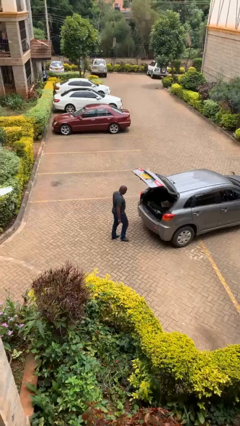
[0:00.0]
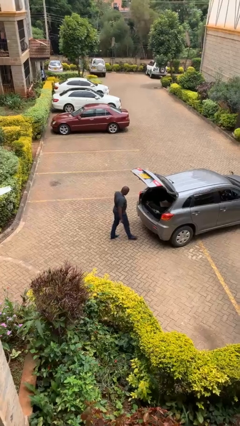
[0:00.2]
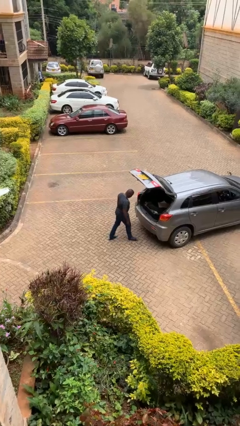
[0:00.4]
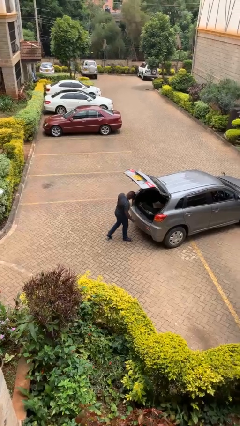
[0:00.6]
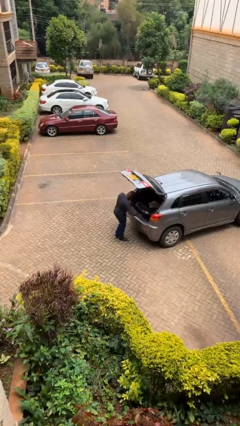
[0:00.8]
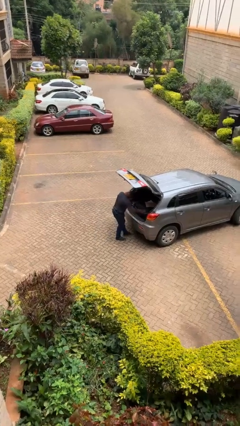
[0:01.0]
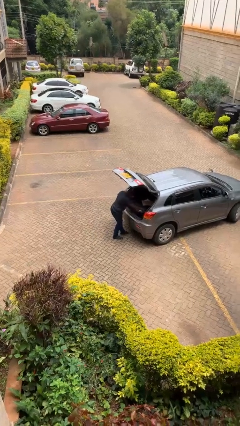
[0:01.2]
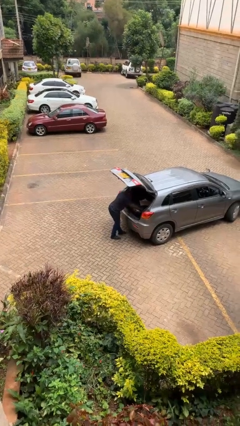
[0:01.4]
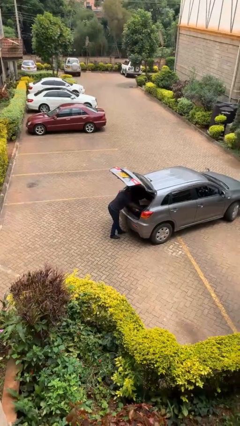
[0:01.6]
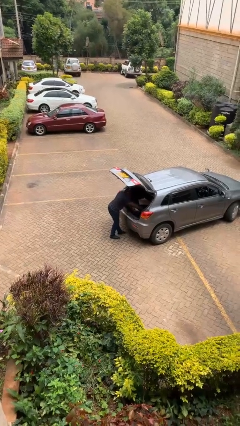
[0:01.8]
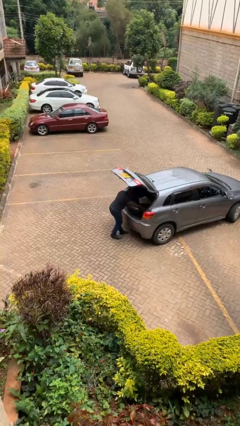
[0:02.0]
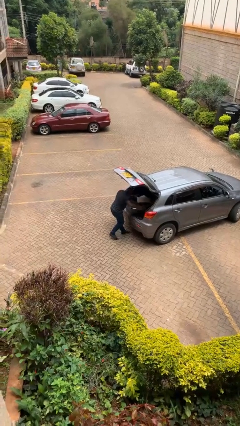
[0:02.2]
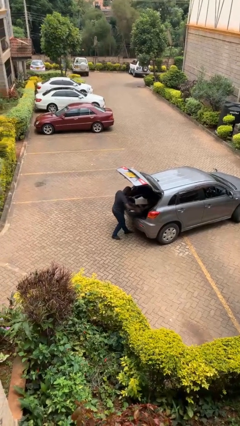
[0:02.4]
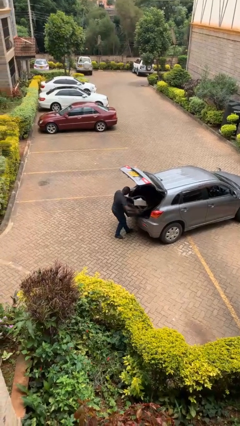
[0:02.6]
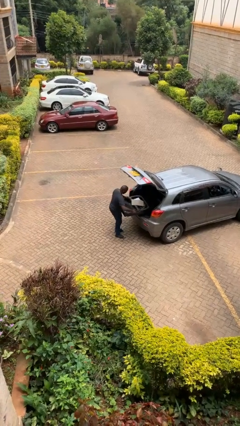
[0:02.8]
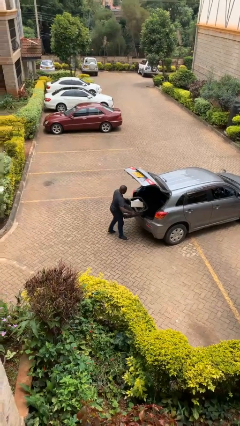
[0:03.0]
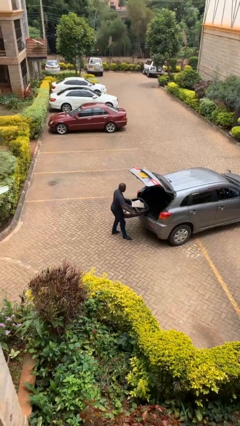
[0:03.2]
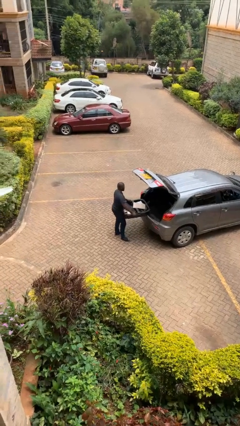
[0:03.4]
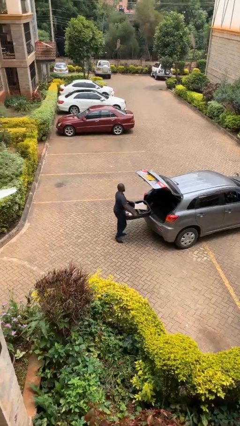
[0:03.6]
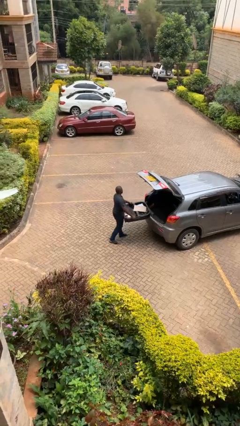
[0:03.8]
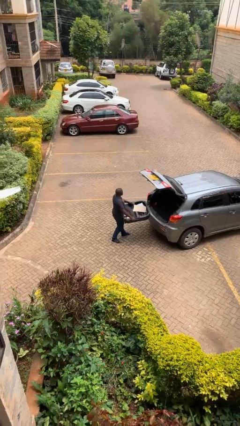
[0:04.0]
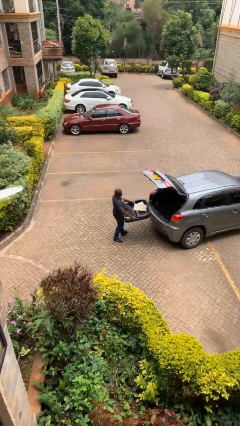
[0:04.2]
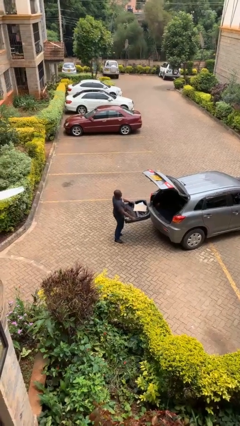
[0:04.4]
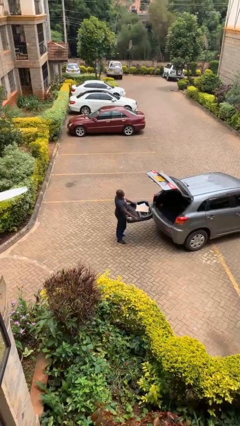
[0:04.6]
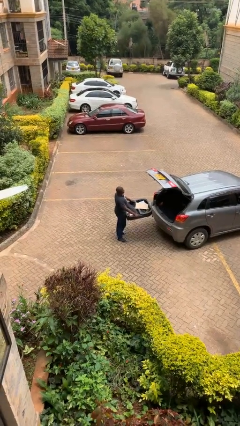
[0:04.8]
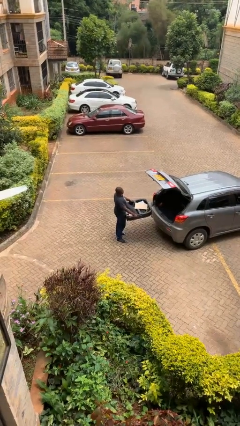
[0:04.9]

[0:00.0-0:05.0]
person unloads car

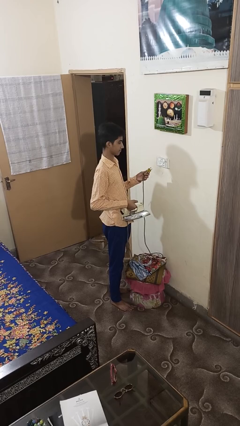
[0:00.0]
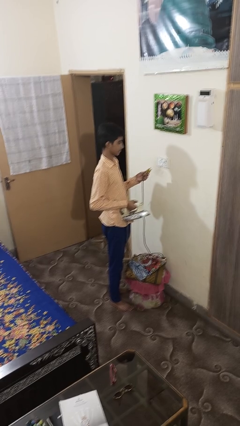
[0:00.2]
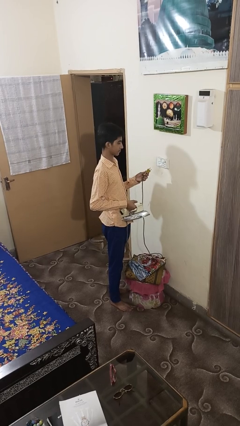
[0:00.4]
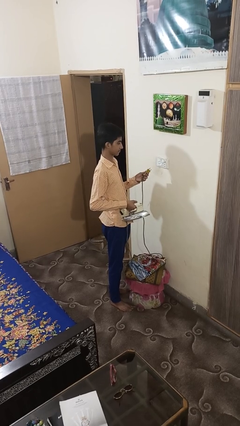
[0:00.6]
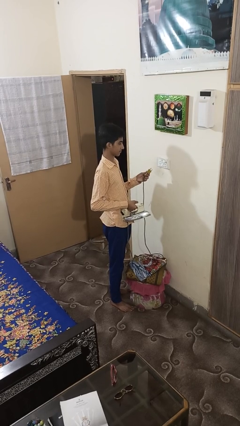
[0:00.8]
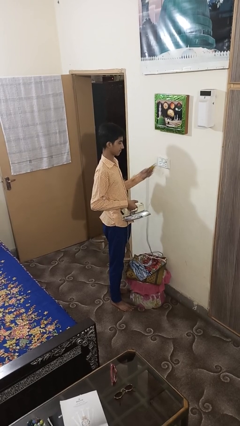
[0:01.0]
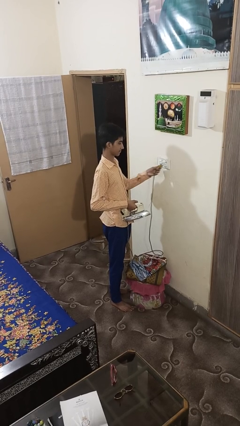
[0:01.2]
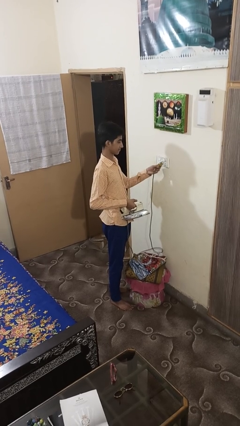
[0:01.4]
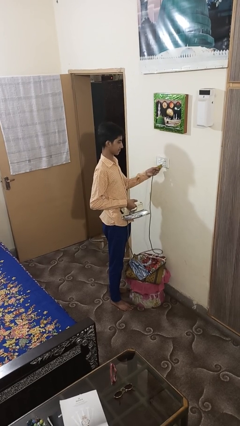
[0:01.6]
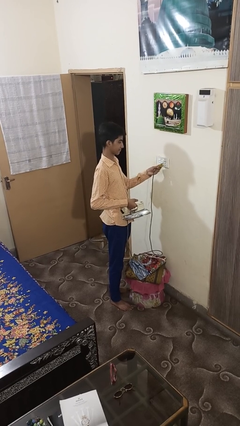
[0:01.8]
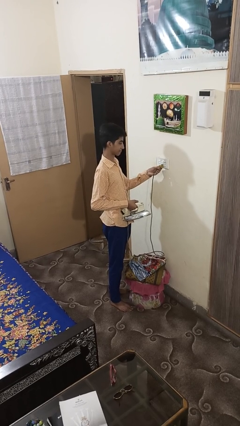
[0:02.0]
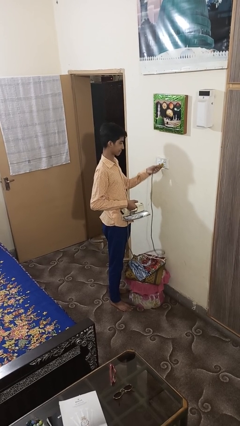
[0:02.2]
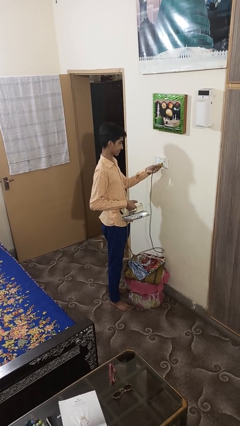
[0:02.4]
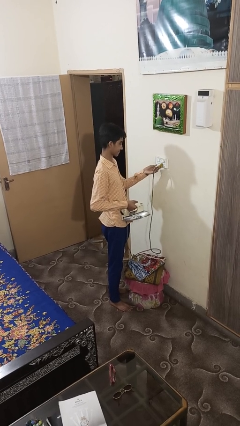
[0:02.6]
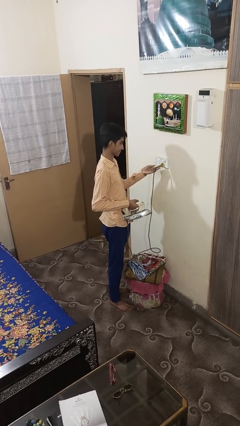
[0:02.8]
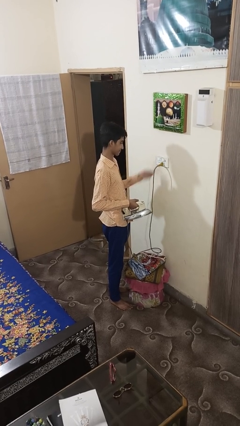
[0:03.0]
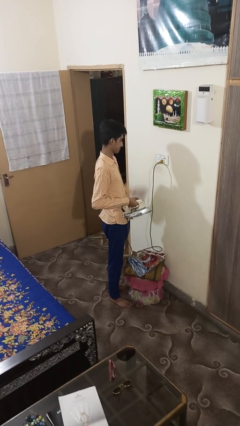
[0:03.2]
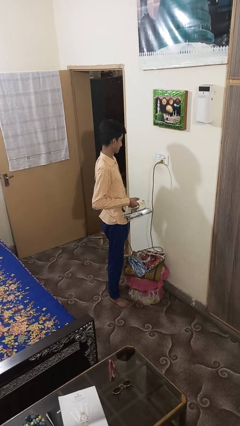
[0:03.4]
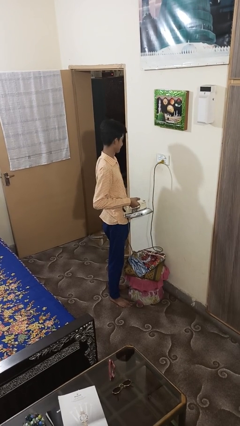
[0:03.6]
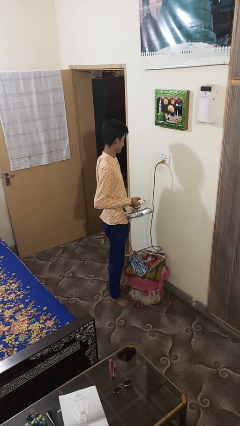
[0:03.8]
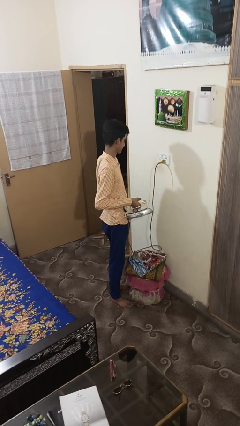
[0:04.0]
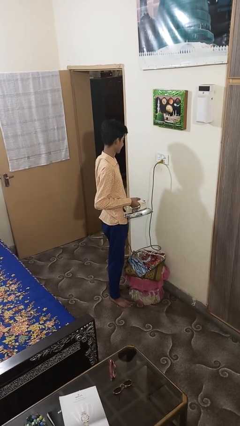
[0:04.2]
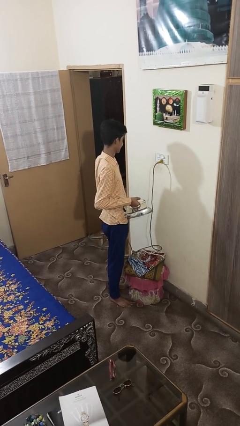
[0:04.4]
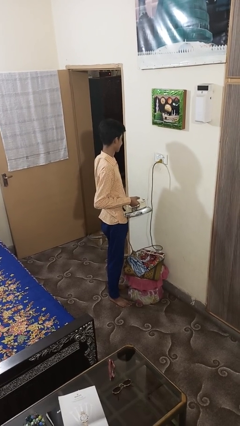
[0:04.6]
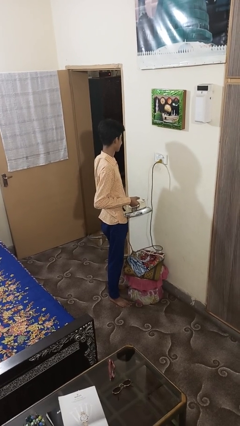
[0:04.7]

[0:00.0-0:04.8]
person plugs into electrical socket

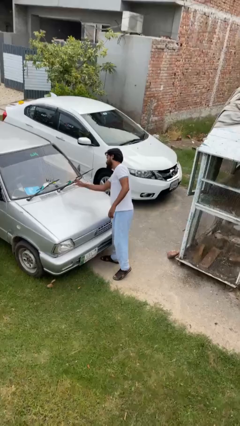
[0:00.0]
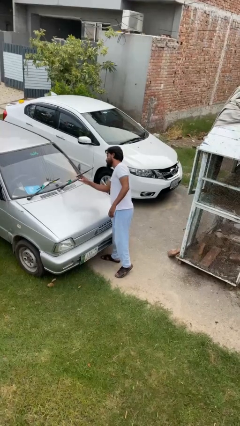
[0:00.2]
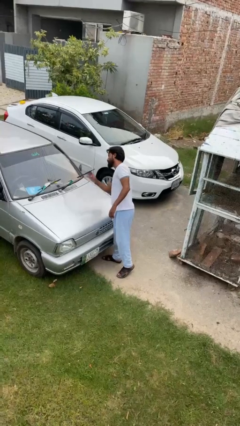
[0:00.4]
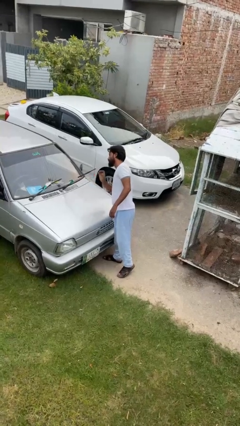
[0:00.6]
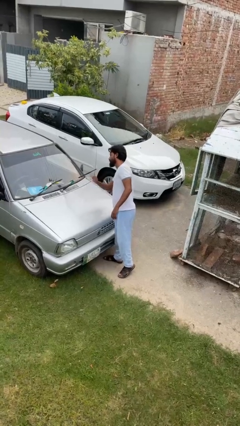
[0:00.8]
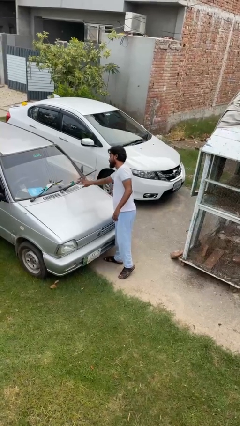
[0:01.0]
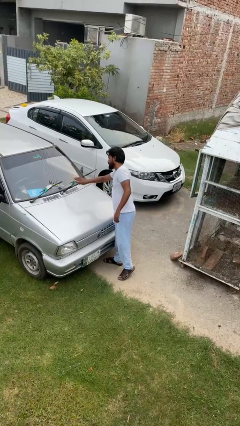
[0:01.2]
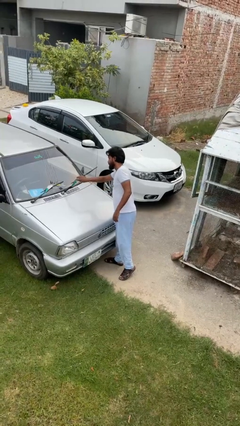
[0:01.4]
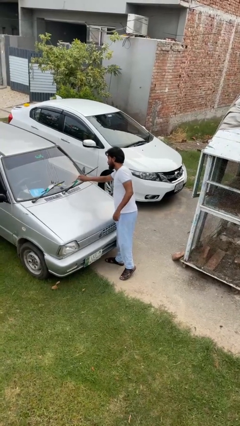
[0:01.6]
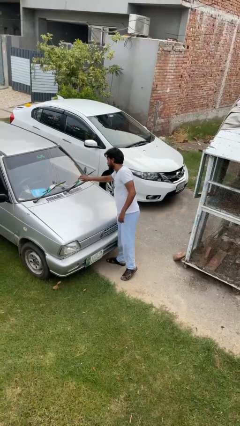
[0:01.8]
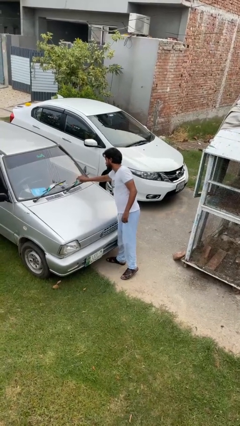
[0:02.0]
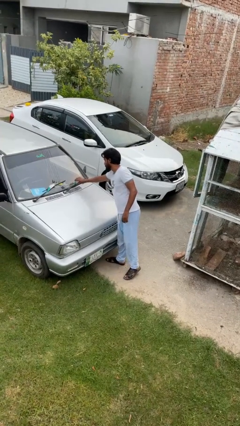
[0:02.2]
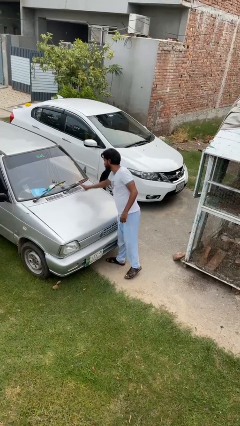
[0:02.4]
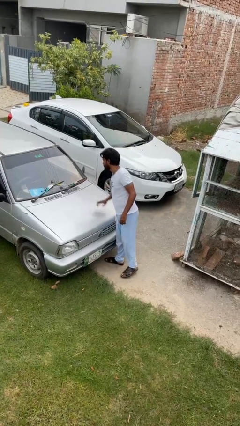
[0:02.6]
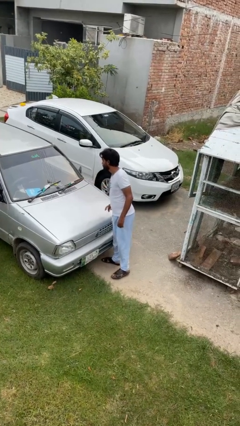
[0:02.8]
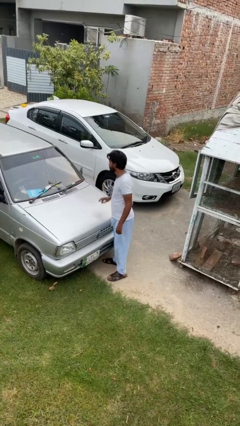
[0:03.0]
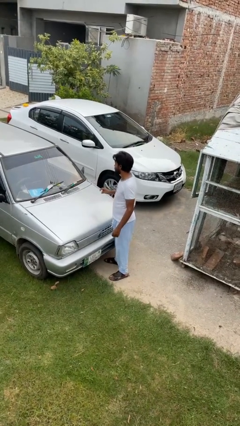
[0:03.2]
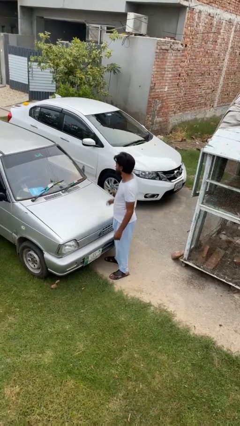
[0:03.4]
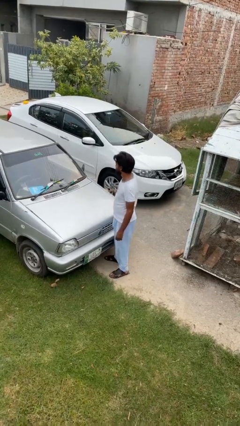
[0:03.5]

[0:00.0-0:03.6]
person flips down car wipers

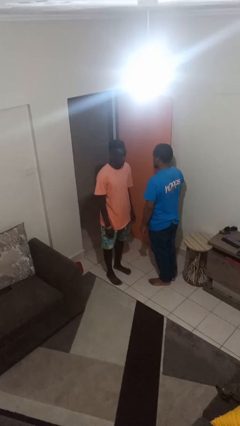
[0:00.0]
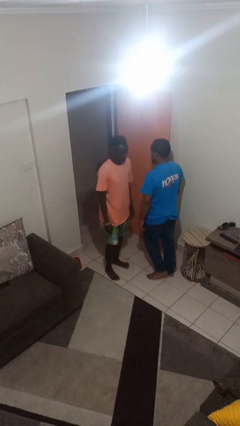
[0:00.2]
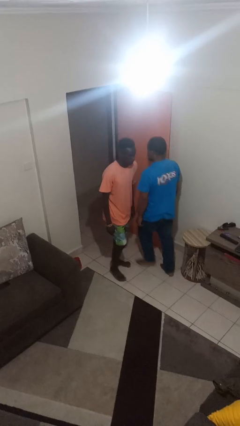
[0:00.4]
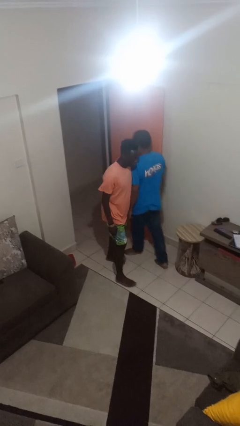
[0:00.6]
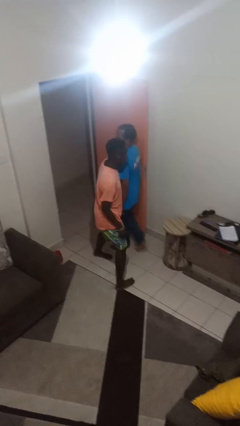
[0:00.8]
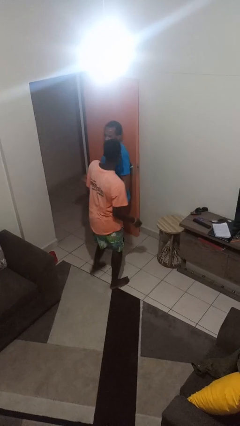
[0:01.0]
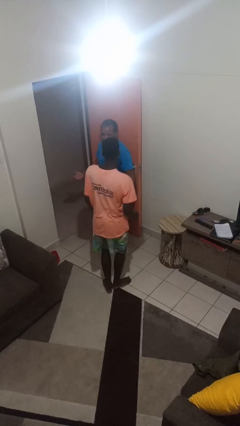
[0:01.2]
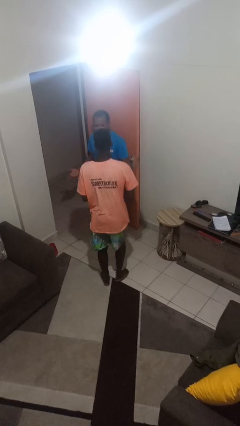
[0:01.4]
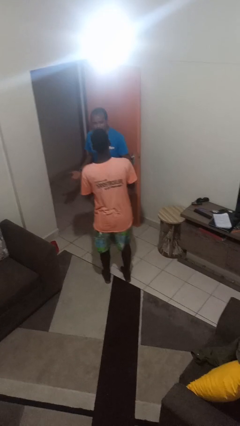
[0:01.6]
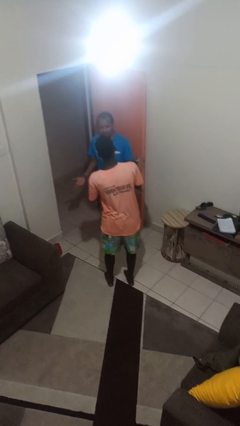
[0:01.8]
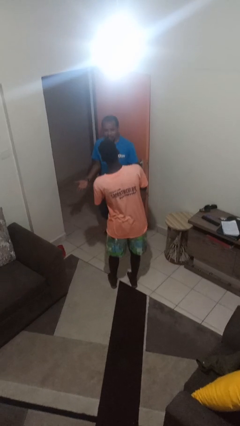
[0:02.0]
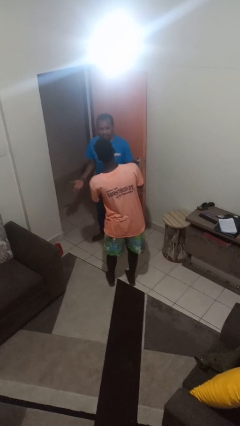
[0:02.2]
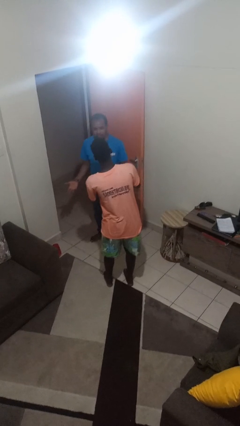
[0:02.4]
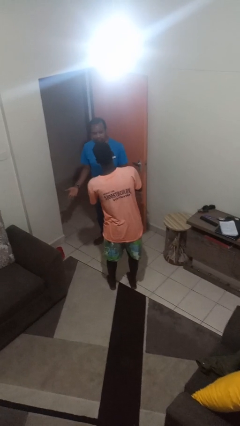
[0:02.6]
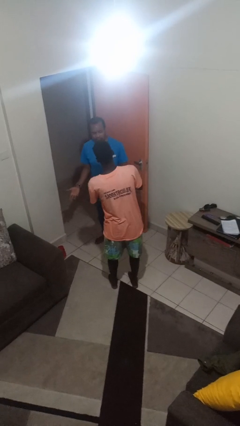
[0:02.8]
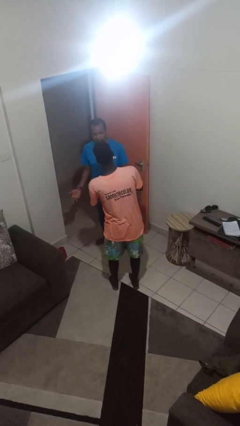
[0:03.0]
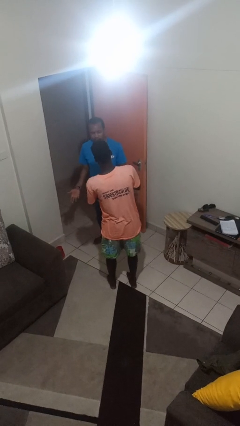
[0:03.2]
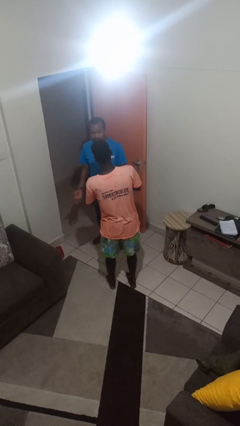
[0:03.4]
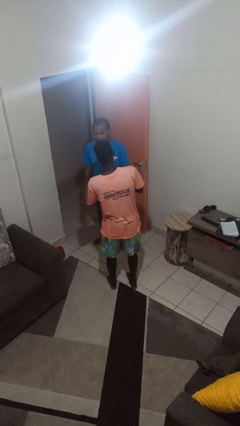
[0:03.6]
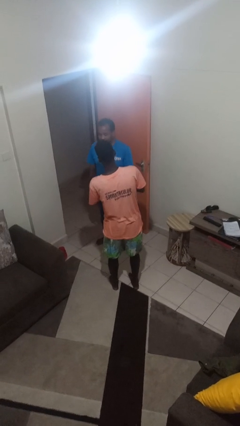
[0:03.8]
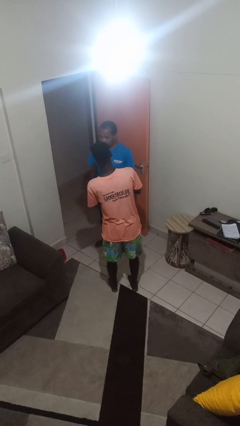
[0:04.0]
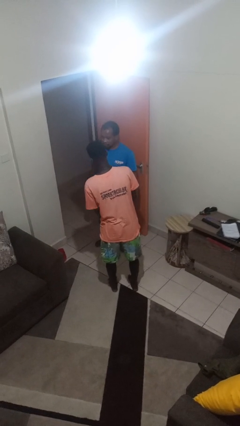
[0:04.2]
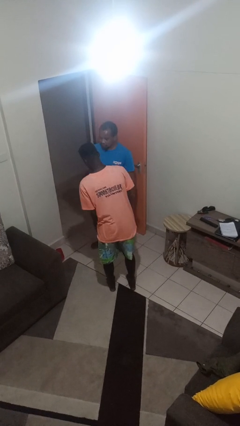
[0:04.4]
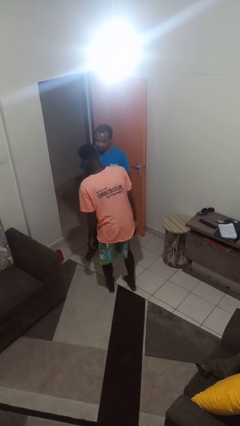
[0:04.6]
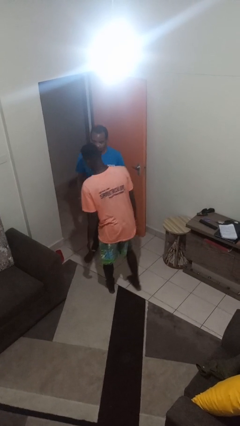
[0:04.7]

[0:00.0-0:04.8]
person bumps into person
